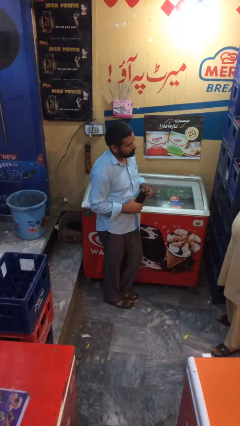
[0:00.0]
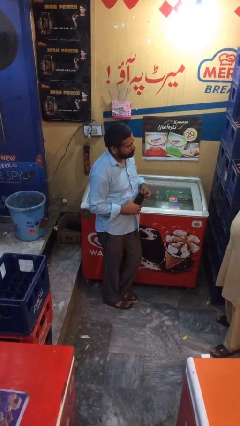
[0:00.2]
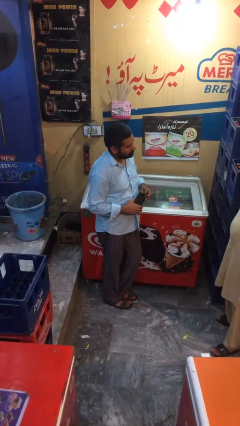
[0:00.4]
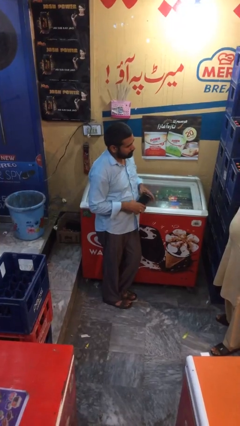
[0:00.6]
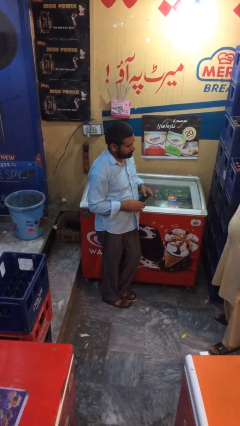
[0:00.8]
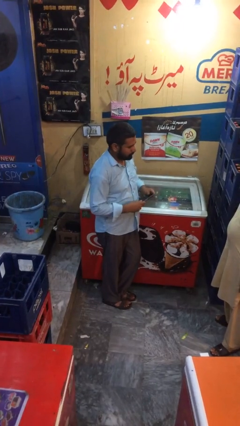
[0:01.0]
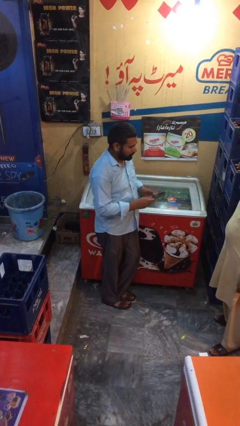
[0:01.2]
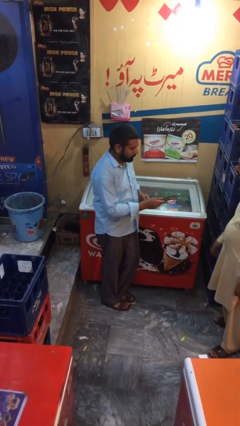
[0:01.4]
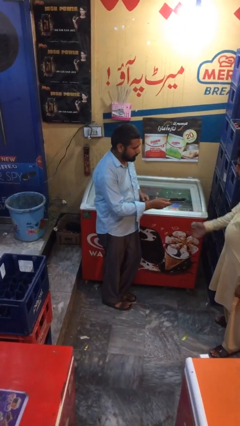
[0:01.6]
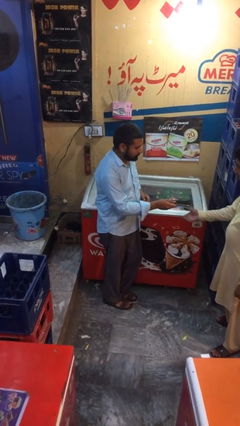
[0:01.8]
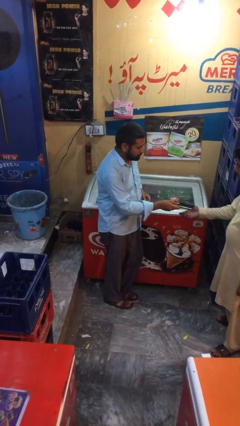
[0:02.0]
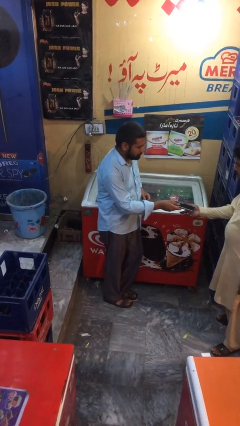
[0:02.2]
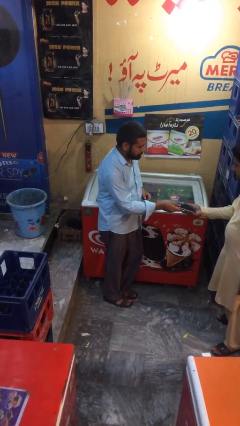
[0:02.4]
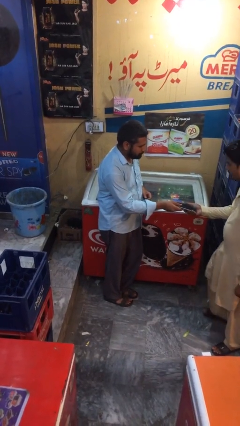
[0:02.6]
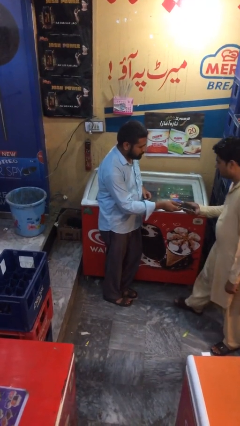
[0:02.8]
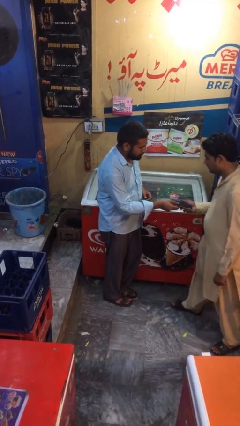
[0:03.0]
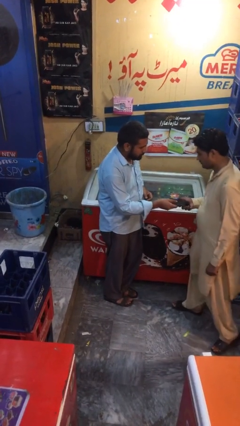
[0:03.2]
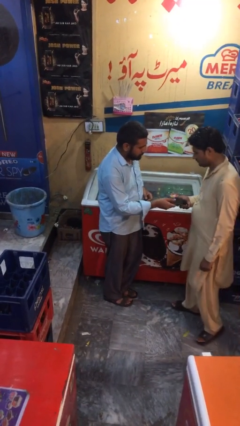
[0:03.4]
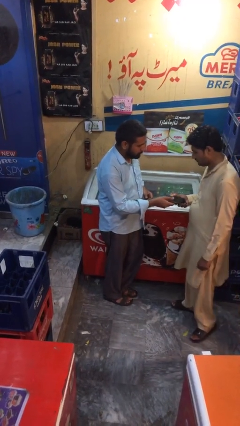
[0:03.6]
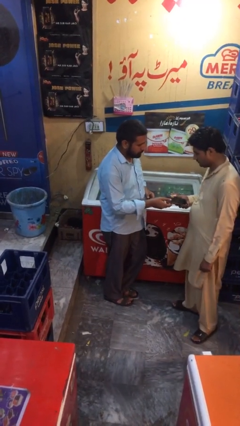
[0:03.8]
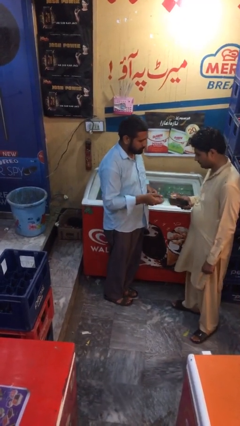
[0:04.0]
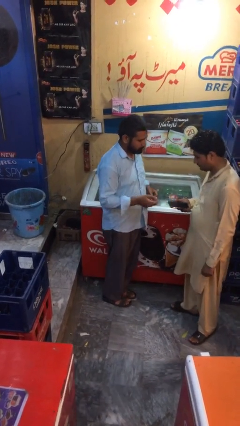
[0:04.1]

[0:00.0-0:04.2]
person transfers object to person

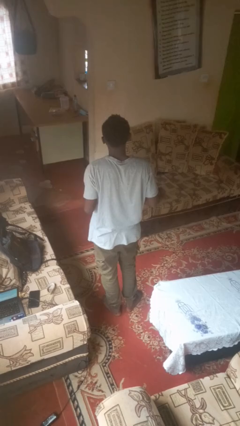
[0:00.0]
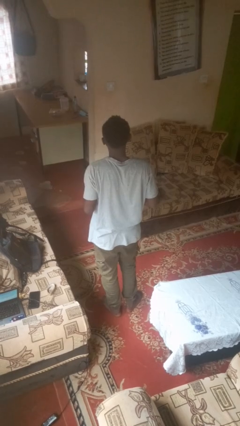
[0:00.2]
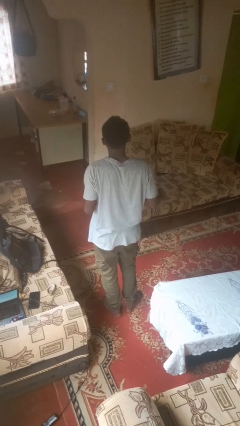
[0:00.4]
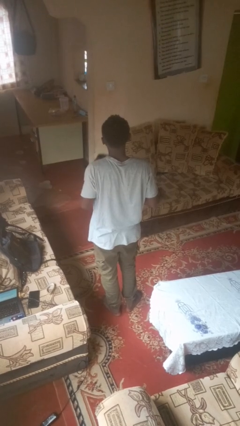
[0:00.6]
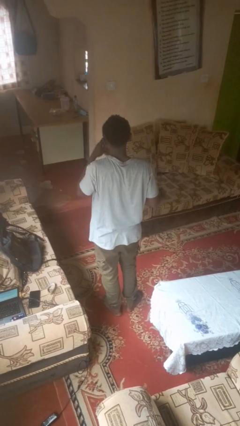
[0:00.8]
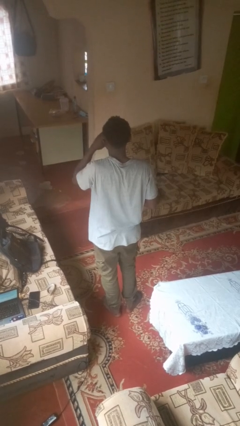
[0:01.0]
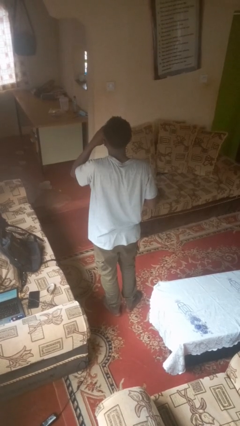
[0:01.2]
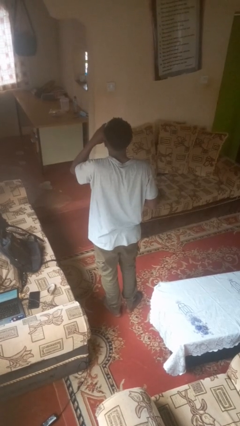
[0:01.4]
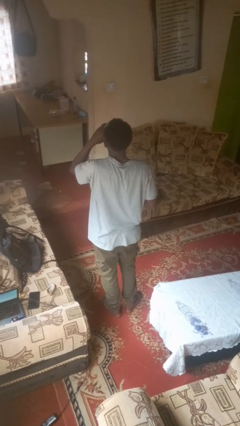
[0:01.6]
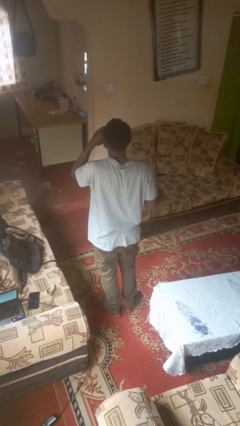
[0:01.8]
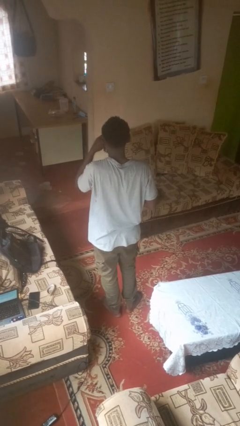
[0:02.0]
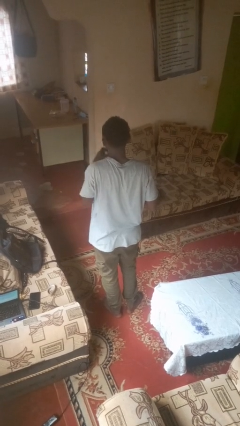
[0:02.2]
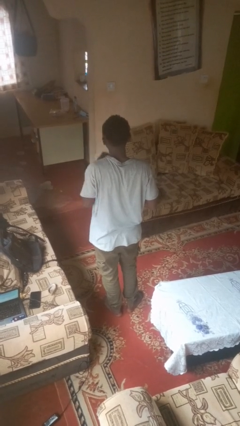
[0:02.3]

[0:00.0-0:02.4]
person drinks from cup

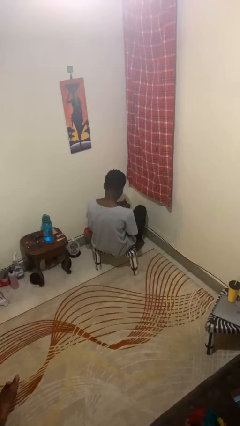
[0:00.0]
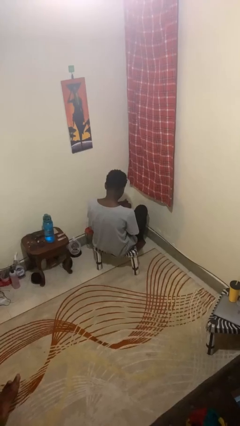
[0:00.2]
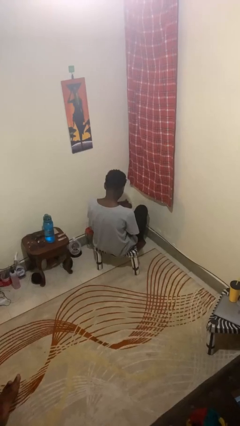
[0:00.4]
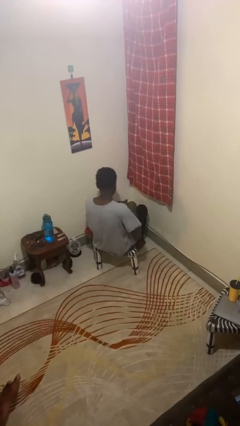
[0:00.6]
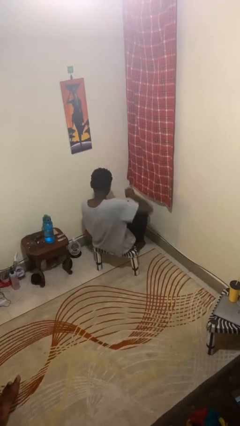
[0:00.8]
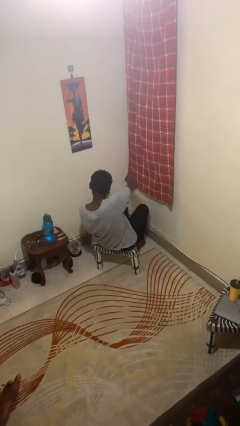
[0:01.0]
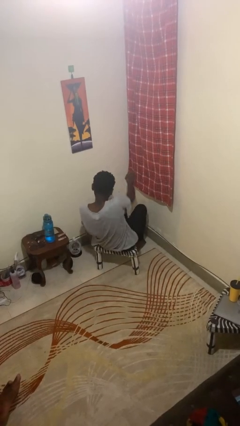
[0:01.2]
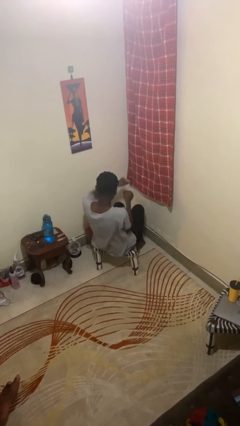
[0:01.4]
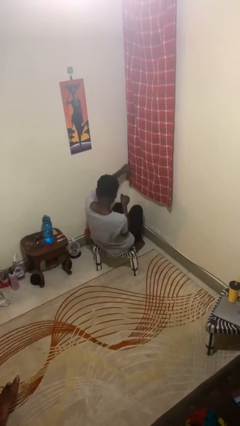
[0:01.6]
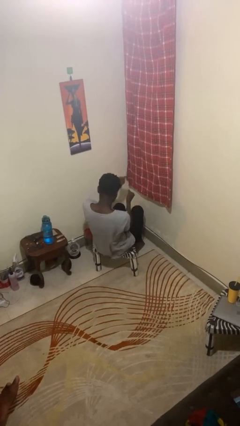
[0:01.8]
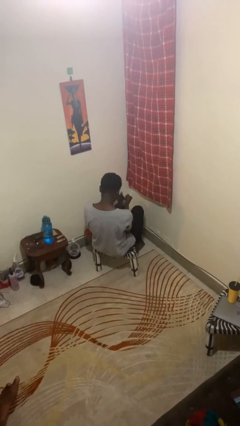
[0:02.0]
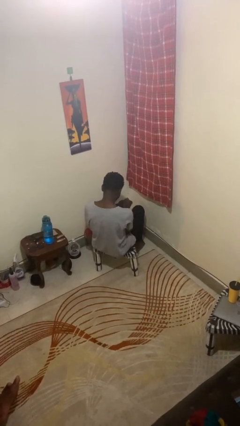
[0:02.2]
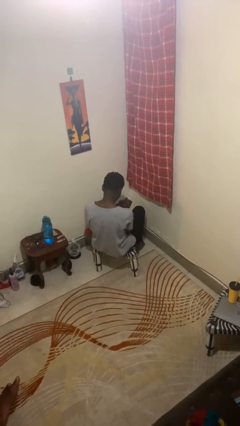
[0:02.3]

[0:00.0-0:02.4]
person punches

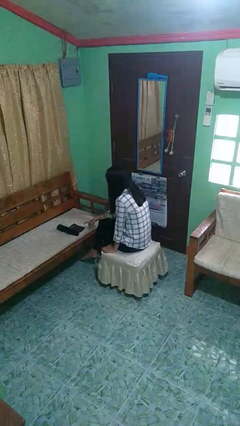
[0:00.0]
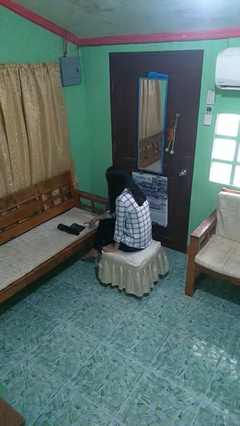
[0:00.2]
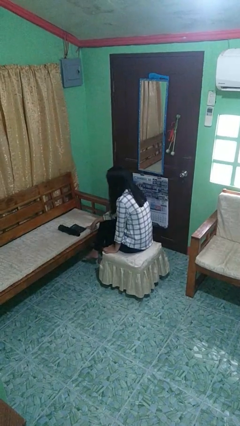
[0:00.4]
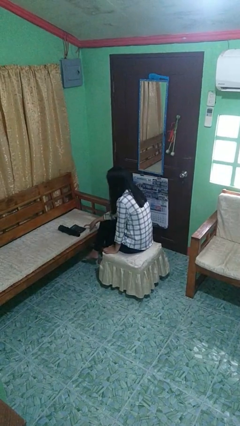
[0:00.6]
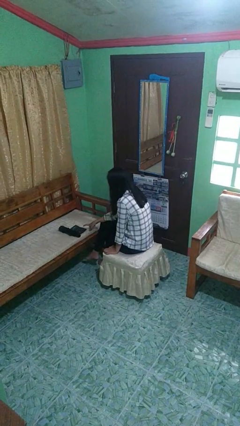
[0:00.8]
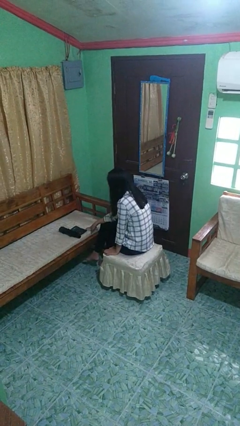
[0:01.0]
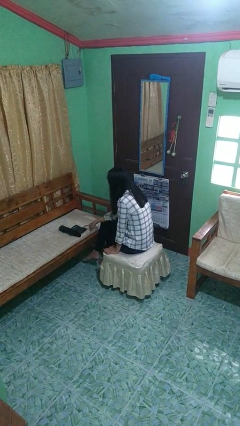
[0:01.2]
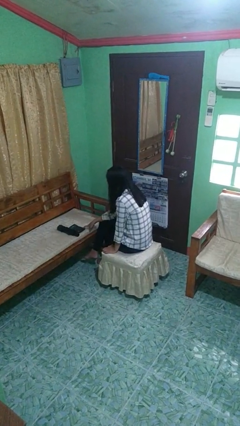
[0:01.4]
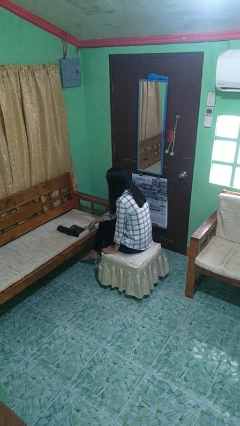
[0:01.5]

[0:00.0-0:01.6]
person taps object with finger

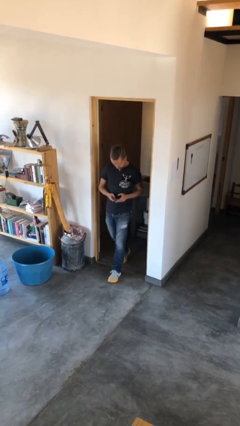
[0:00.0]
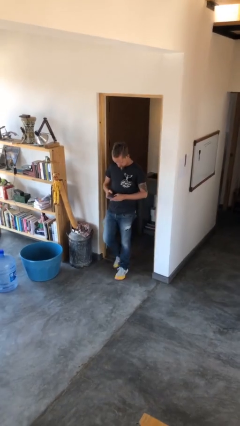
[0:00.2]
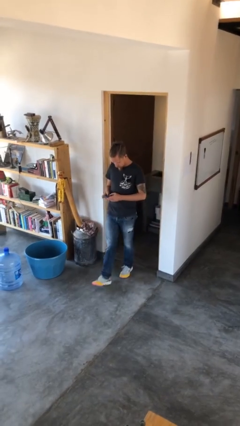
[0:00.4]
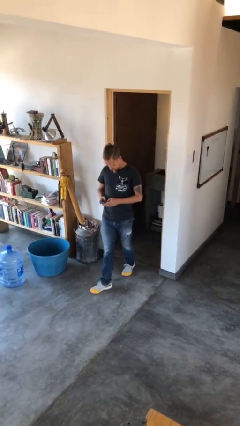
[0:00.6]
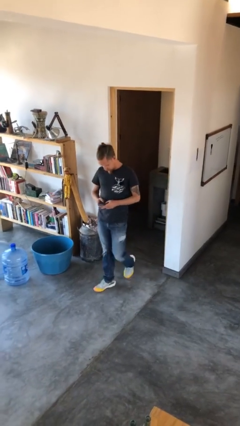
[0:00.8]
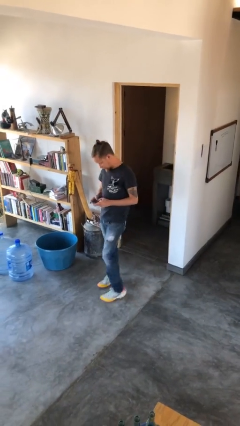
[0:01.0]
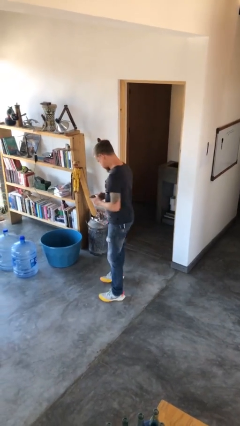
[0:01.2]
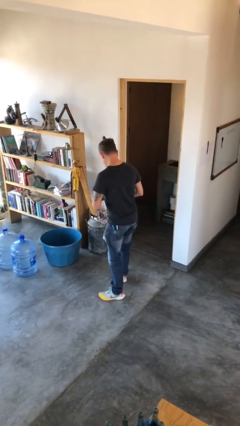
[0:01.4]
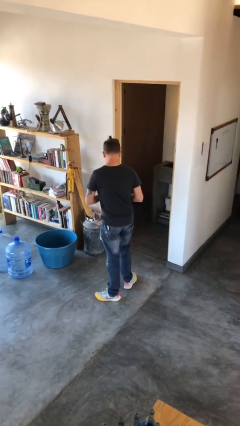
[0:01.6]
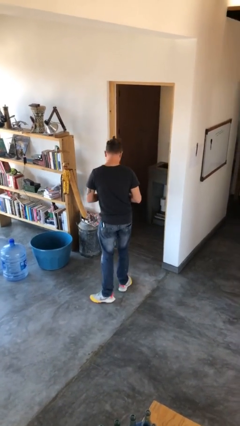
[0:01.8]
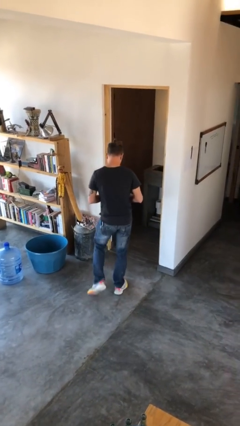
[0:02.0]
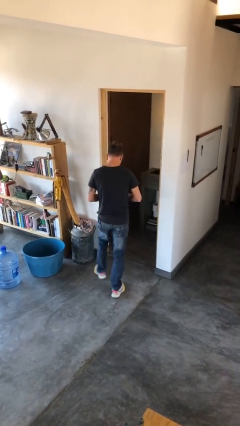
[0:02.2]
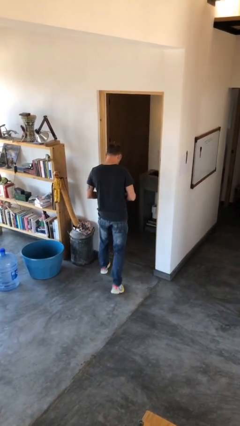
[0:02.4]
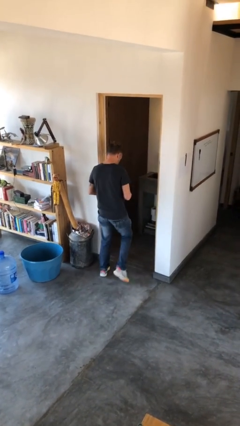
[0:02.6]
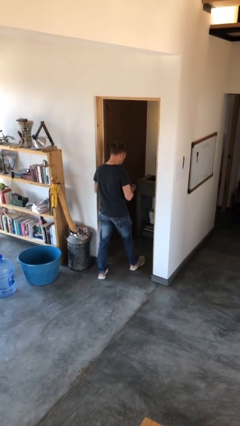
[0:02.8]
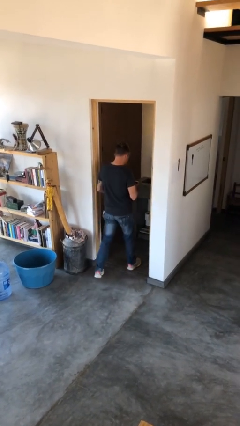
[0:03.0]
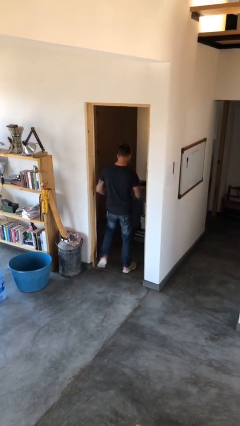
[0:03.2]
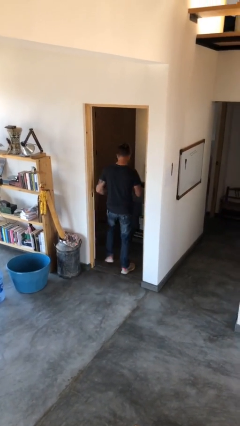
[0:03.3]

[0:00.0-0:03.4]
person exits scene through structure

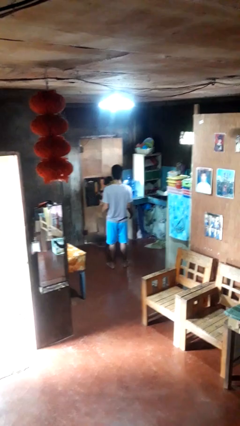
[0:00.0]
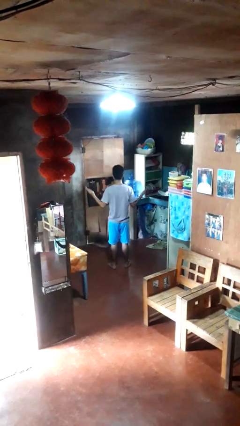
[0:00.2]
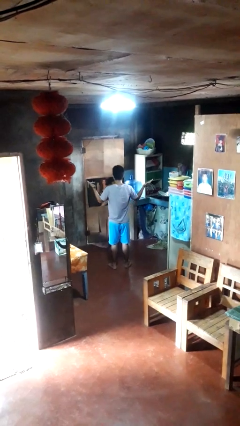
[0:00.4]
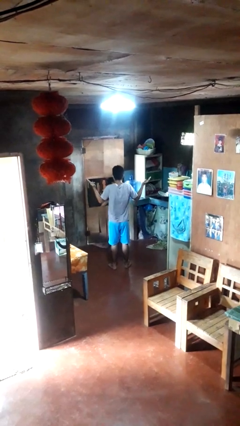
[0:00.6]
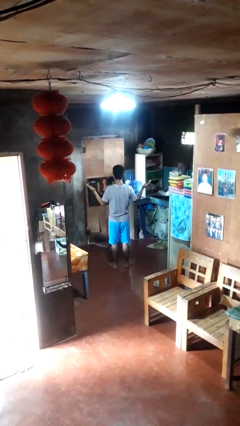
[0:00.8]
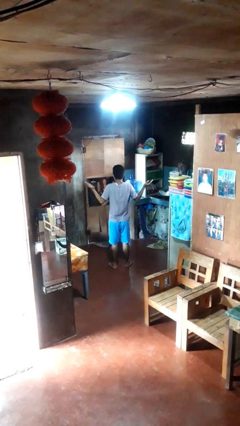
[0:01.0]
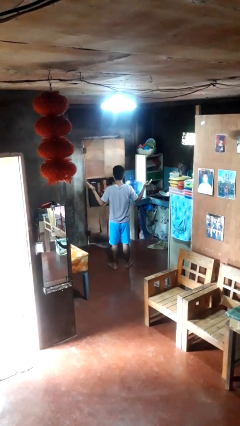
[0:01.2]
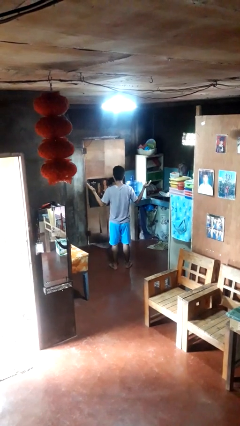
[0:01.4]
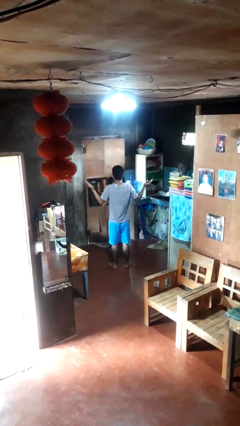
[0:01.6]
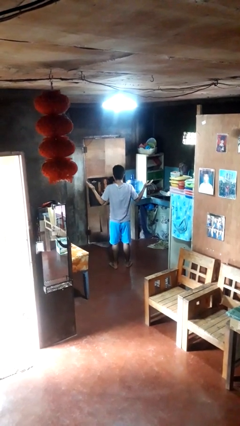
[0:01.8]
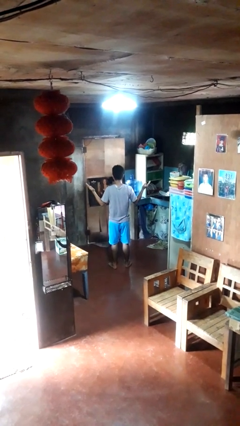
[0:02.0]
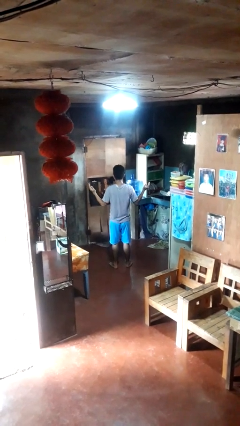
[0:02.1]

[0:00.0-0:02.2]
person shrugs

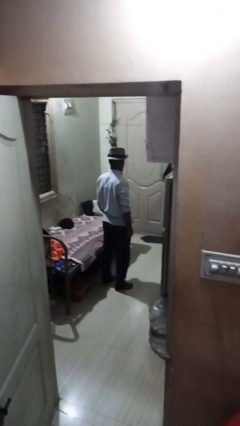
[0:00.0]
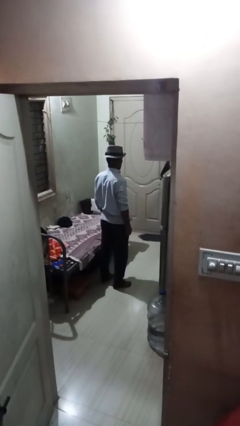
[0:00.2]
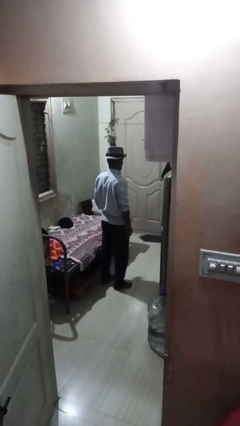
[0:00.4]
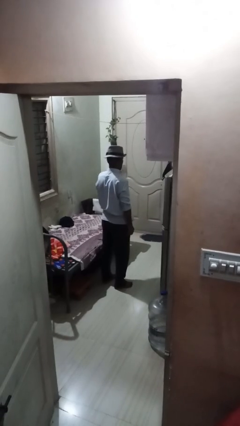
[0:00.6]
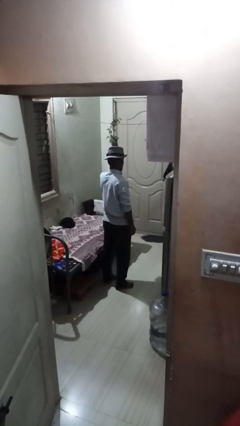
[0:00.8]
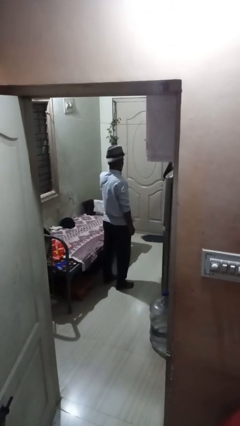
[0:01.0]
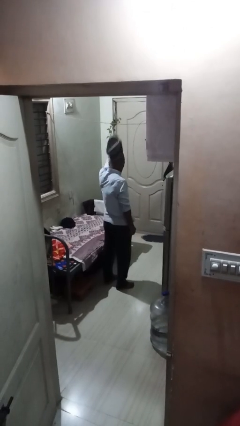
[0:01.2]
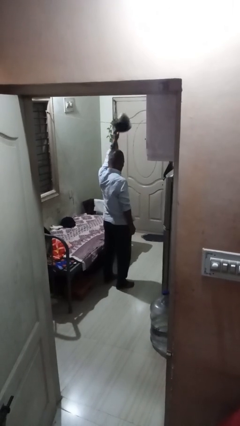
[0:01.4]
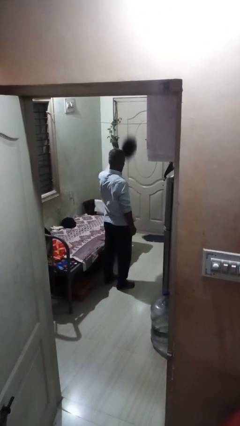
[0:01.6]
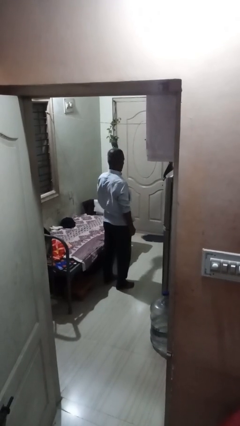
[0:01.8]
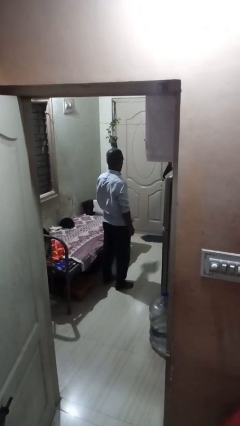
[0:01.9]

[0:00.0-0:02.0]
person takes off hat
